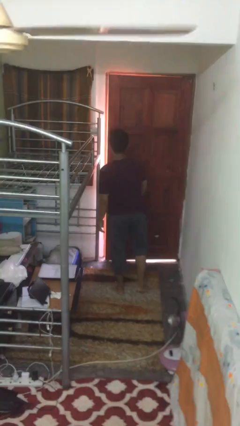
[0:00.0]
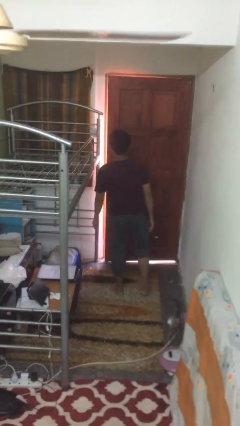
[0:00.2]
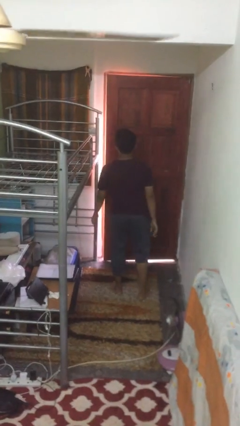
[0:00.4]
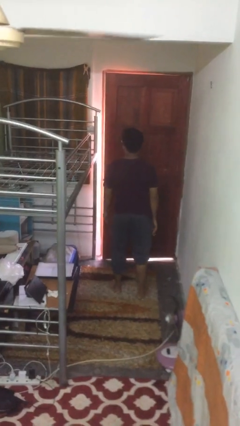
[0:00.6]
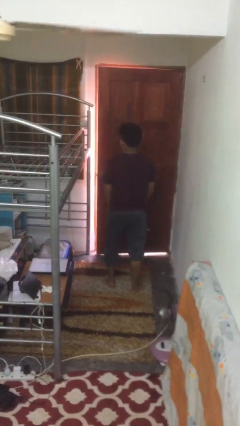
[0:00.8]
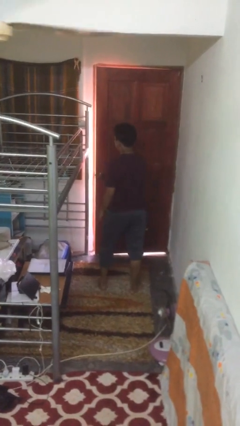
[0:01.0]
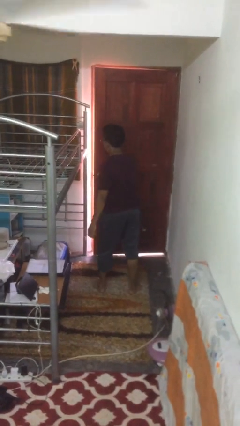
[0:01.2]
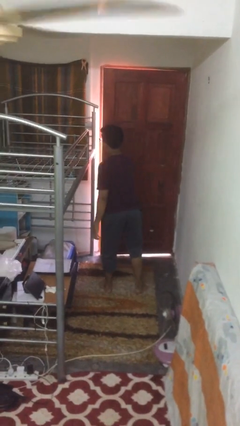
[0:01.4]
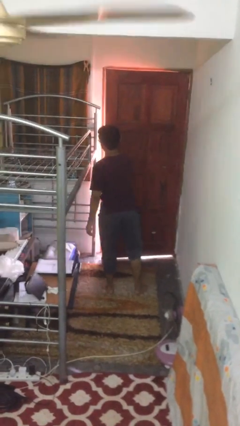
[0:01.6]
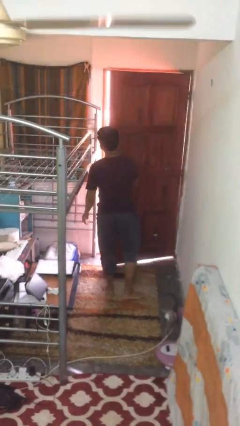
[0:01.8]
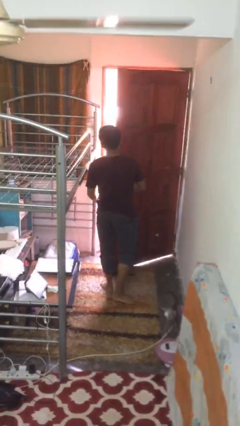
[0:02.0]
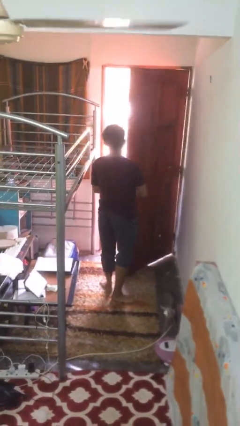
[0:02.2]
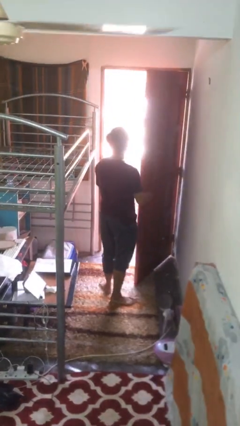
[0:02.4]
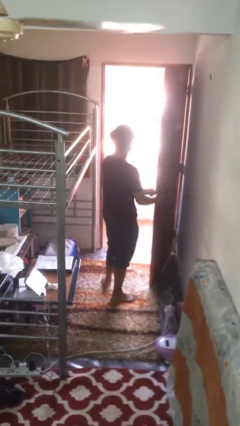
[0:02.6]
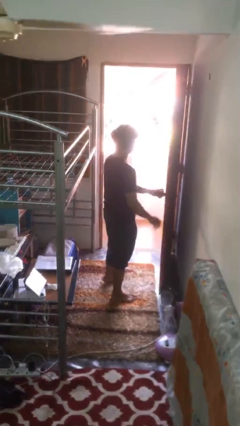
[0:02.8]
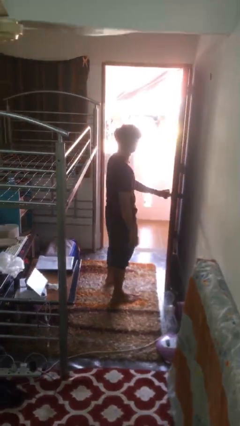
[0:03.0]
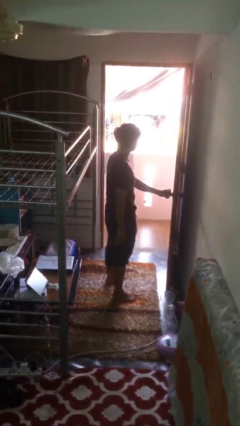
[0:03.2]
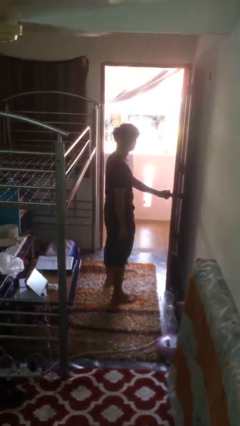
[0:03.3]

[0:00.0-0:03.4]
person opens facility door

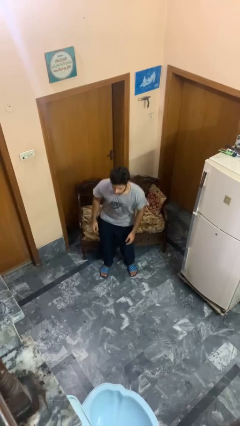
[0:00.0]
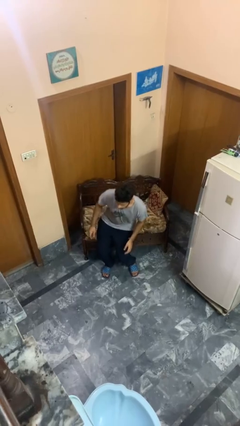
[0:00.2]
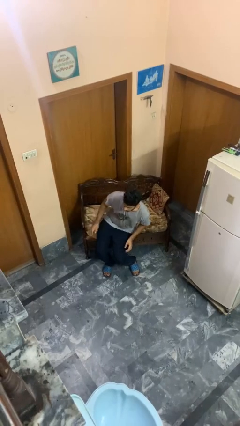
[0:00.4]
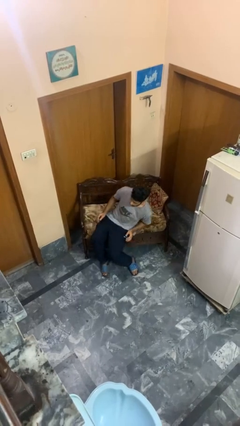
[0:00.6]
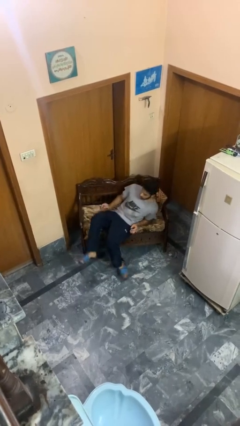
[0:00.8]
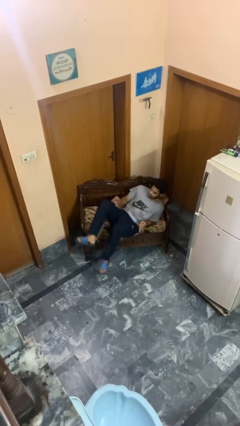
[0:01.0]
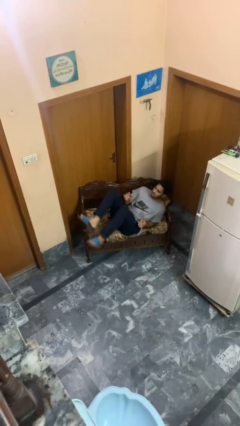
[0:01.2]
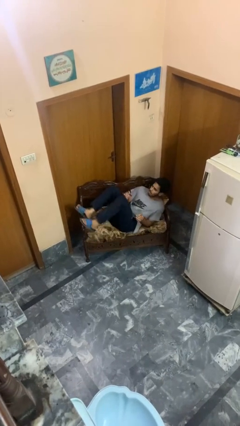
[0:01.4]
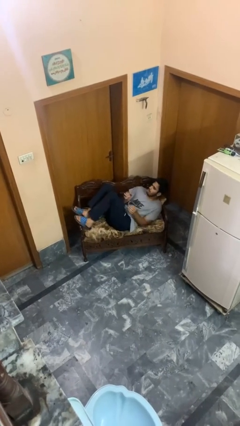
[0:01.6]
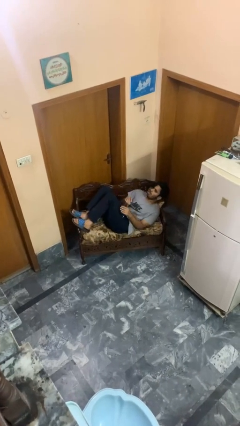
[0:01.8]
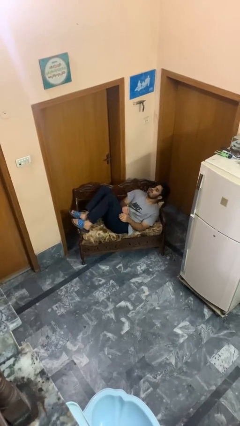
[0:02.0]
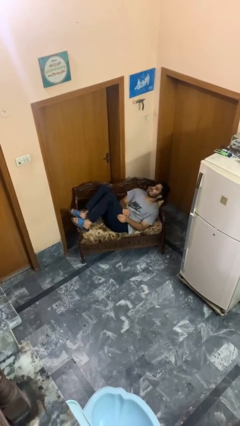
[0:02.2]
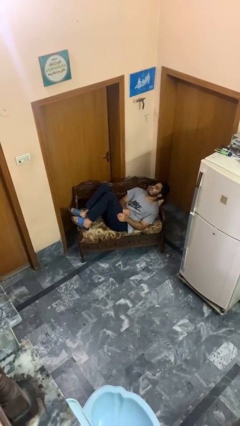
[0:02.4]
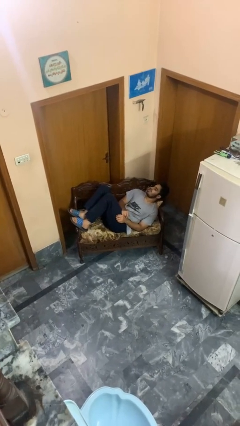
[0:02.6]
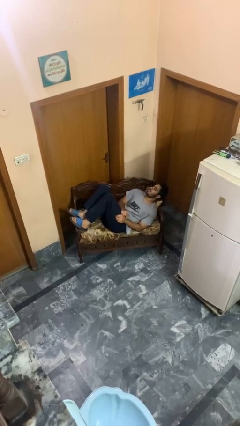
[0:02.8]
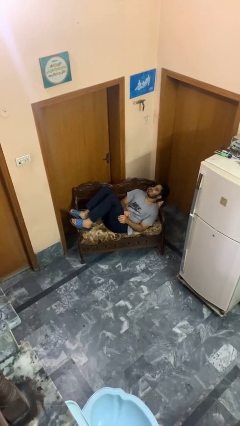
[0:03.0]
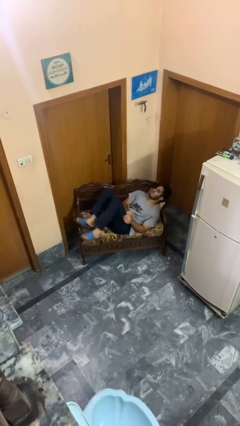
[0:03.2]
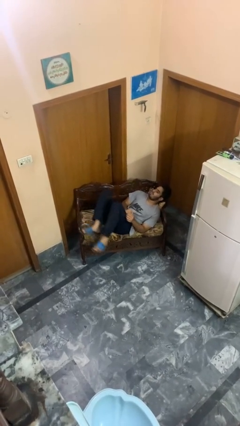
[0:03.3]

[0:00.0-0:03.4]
person lies down on couch

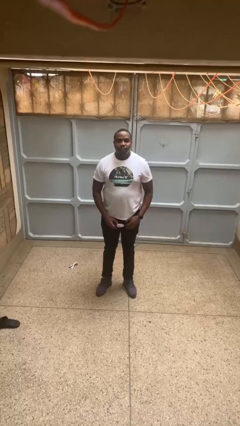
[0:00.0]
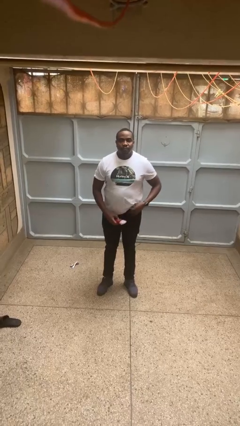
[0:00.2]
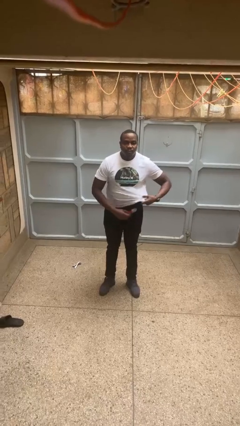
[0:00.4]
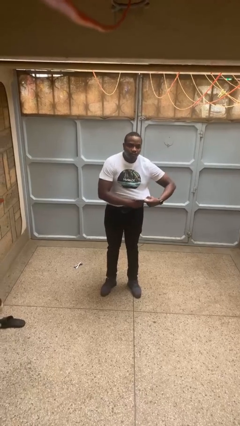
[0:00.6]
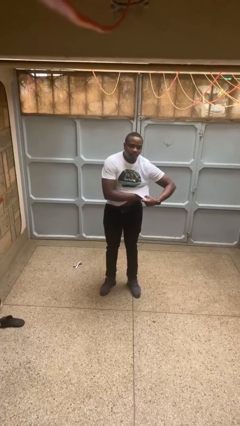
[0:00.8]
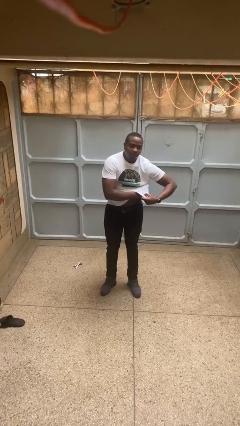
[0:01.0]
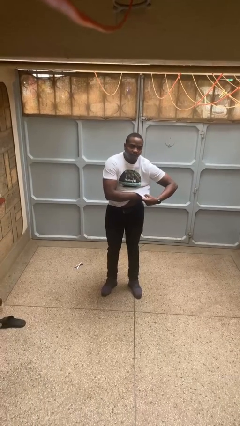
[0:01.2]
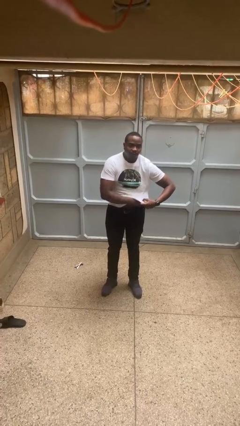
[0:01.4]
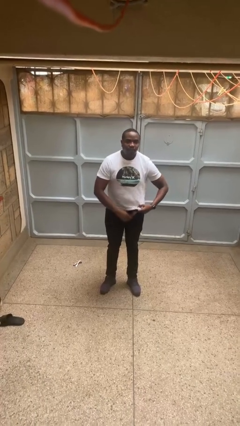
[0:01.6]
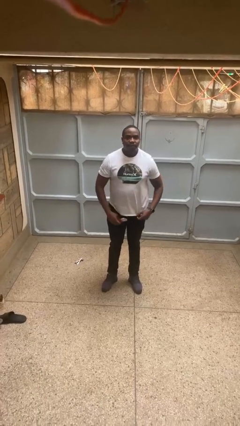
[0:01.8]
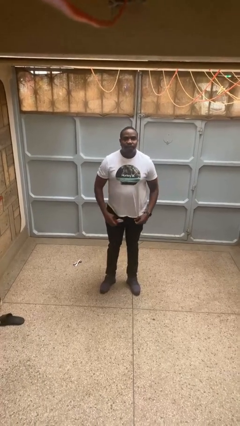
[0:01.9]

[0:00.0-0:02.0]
person applies deodorant

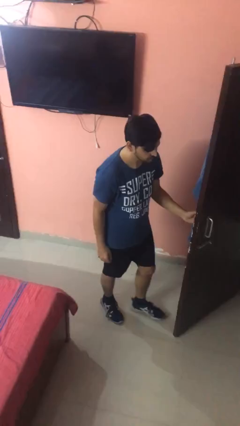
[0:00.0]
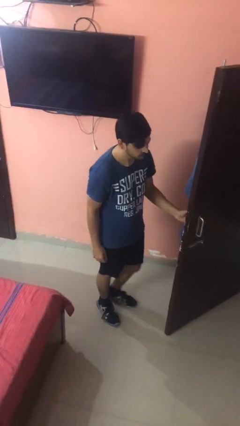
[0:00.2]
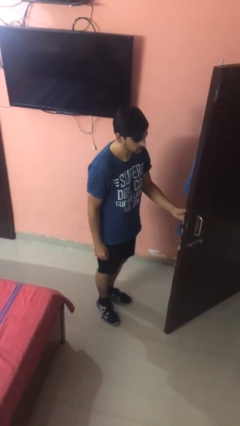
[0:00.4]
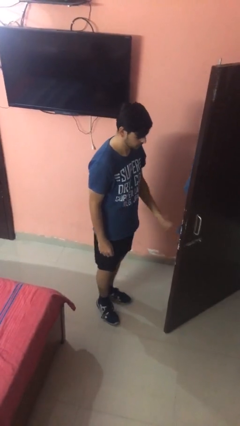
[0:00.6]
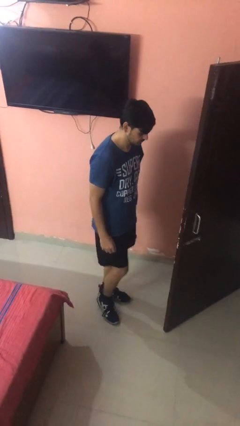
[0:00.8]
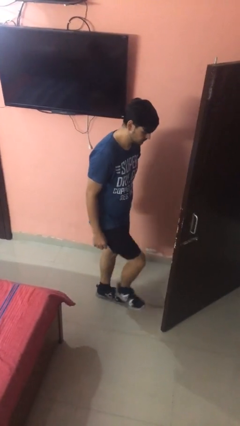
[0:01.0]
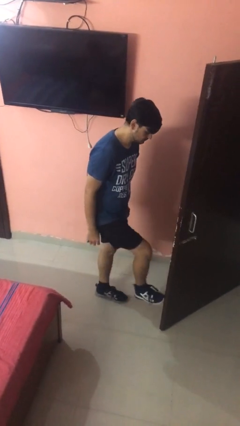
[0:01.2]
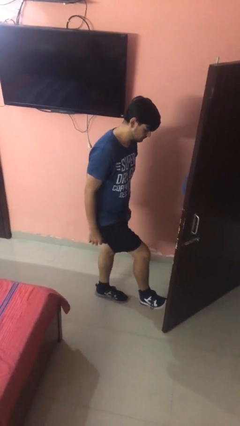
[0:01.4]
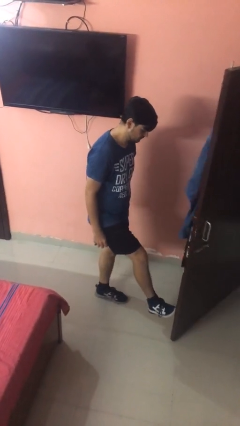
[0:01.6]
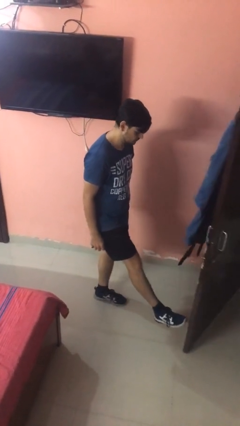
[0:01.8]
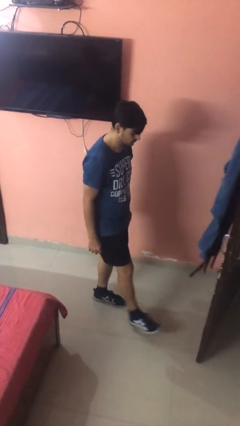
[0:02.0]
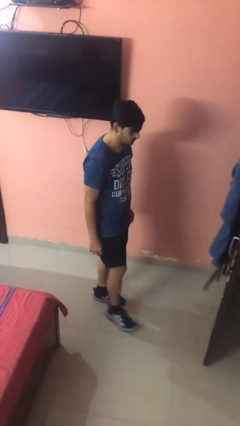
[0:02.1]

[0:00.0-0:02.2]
person closes door with foot

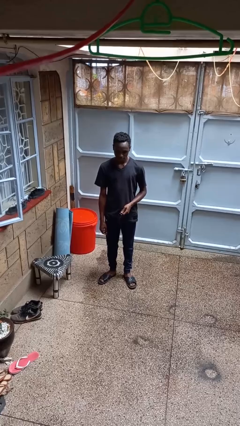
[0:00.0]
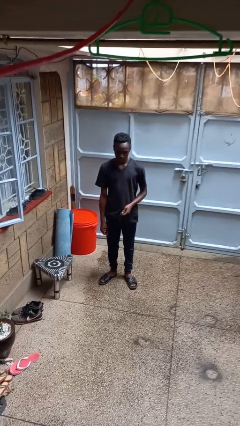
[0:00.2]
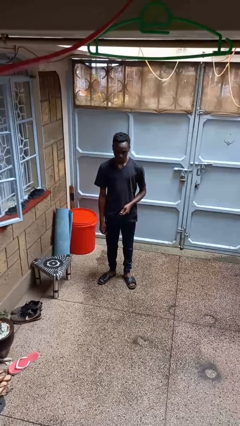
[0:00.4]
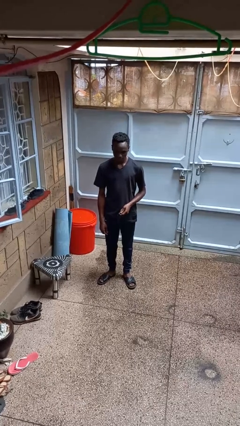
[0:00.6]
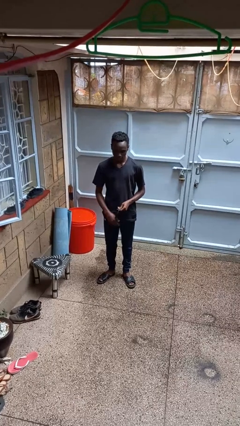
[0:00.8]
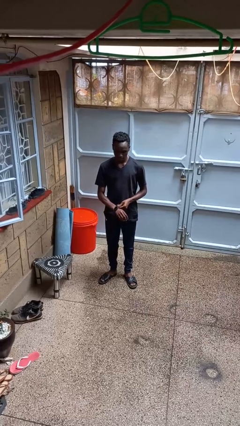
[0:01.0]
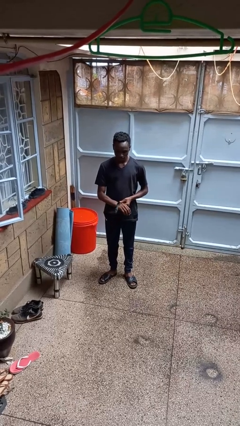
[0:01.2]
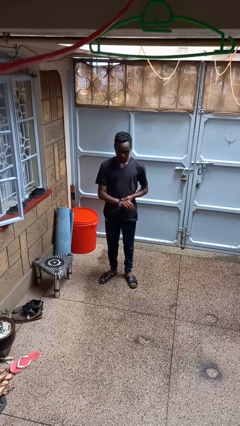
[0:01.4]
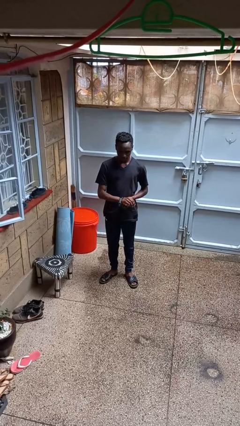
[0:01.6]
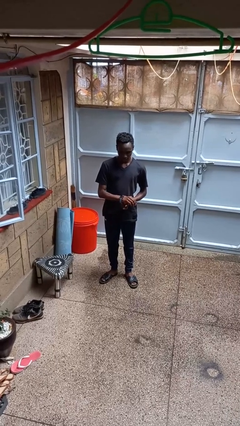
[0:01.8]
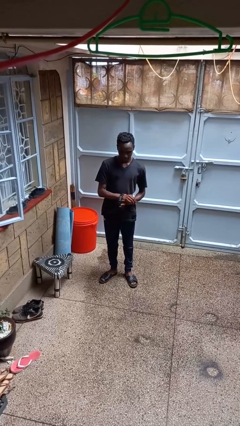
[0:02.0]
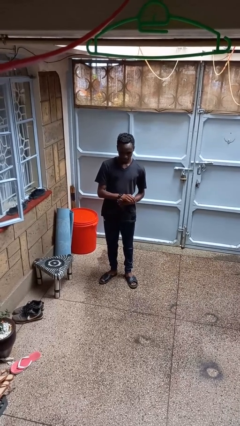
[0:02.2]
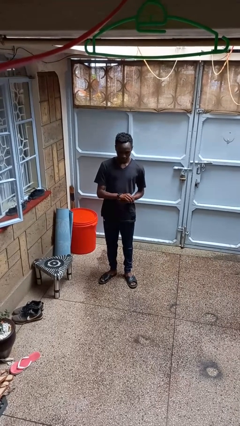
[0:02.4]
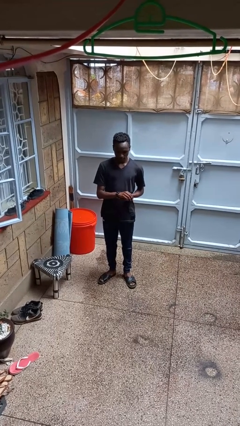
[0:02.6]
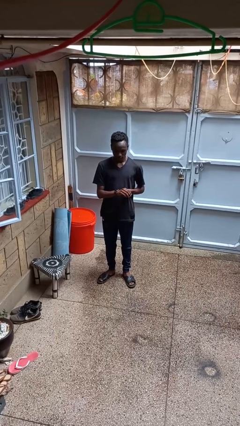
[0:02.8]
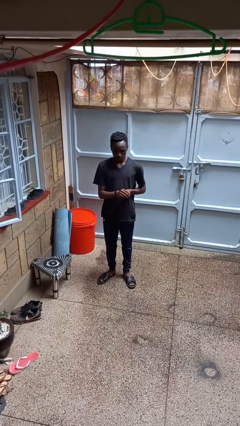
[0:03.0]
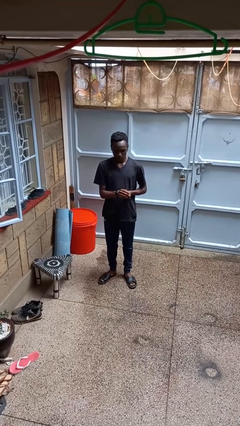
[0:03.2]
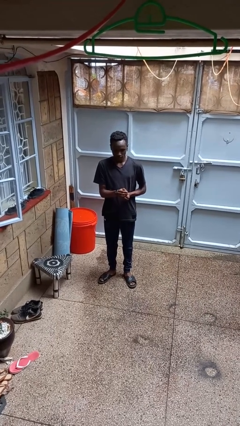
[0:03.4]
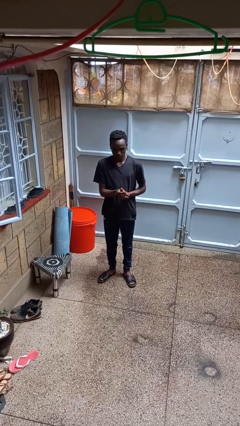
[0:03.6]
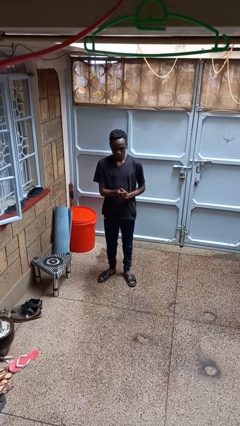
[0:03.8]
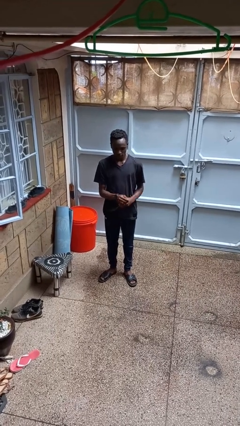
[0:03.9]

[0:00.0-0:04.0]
person puts on wristwatch

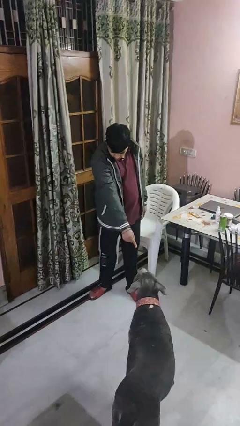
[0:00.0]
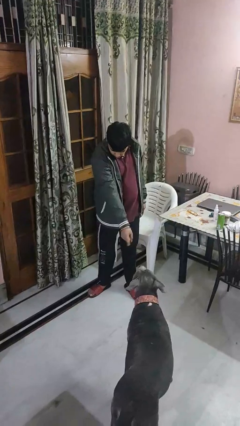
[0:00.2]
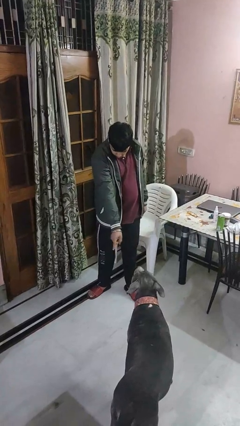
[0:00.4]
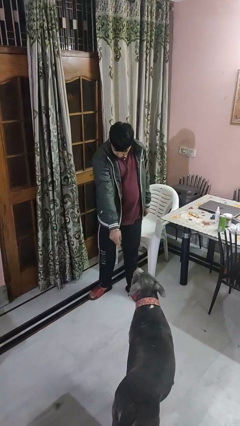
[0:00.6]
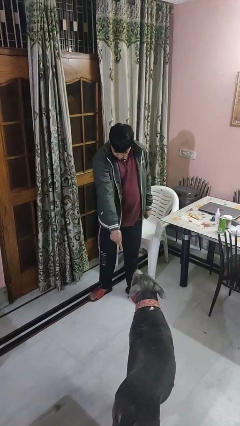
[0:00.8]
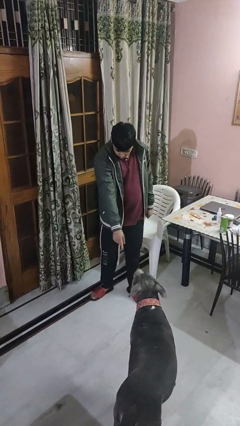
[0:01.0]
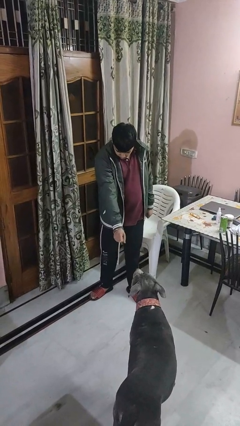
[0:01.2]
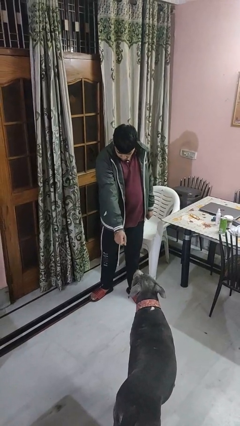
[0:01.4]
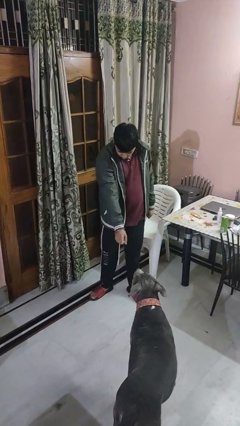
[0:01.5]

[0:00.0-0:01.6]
person points to dog

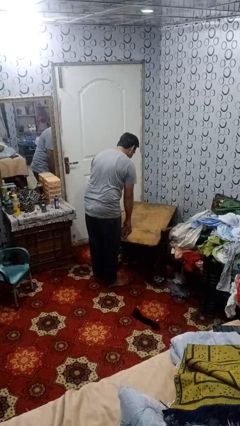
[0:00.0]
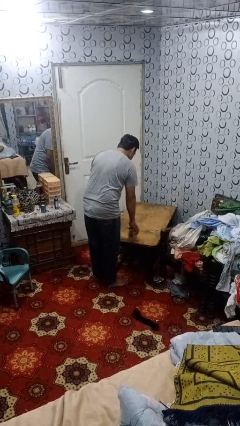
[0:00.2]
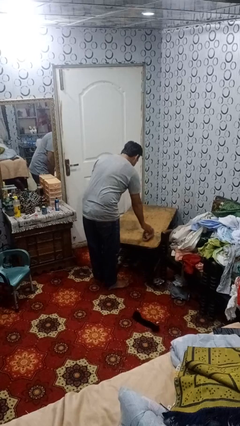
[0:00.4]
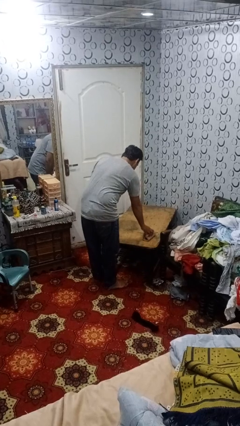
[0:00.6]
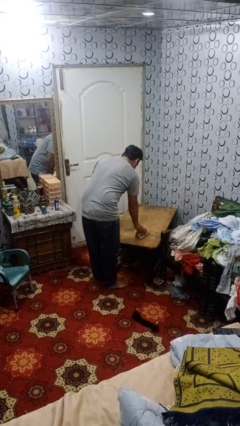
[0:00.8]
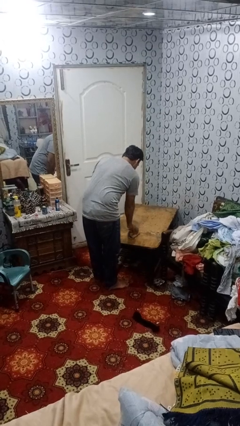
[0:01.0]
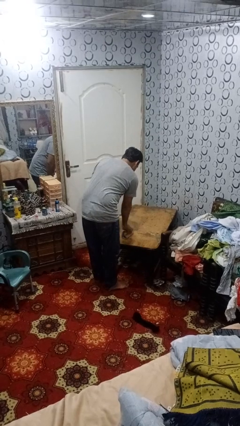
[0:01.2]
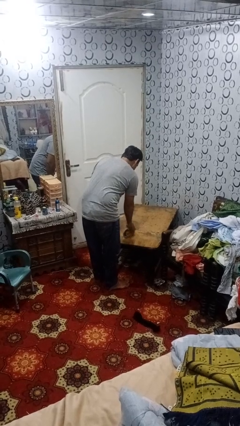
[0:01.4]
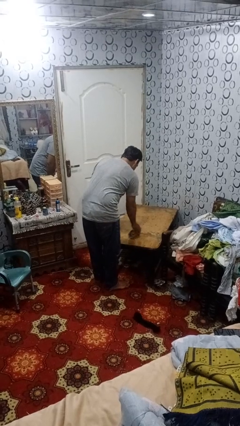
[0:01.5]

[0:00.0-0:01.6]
person cleans table with rag
